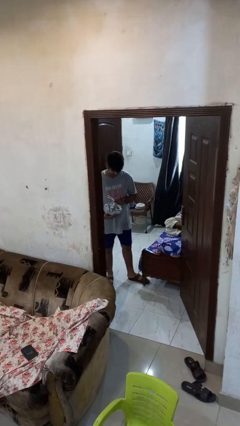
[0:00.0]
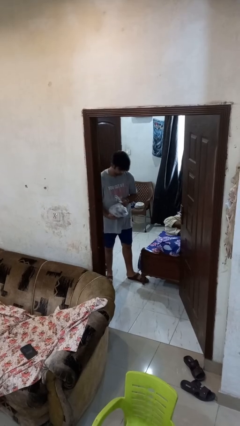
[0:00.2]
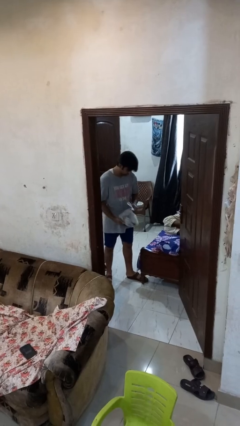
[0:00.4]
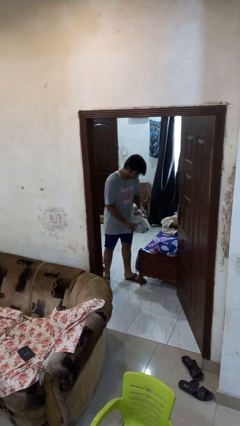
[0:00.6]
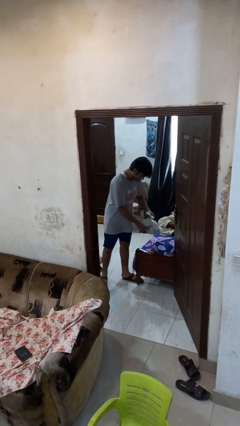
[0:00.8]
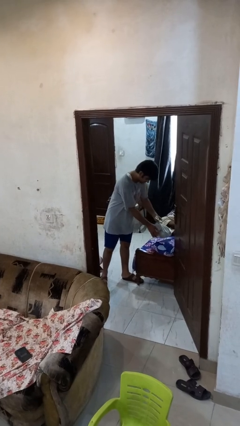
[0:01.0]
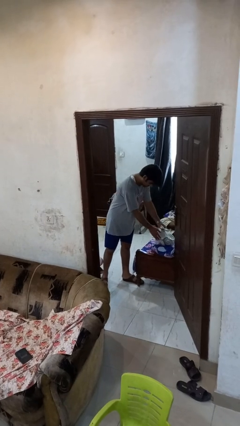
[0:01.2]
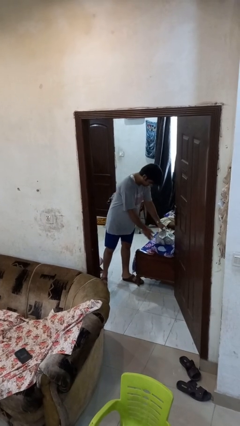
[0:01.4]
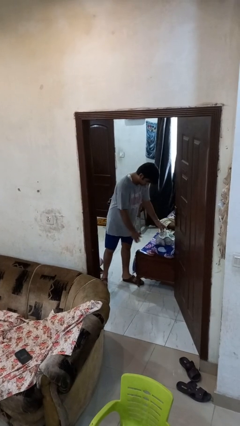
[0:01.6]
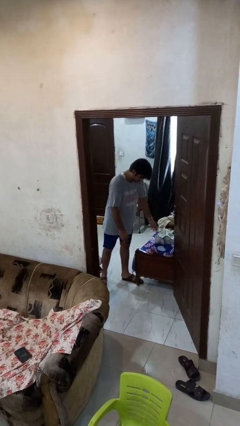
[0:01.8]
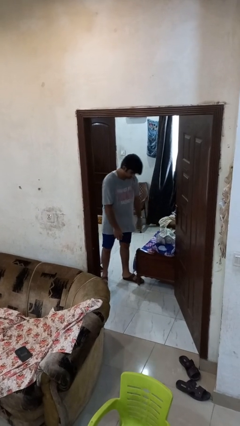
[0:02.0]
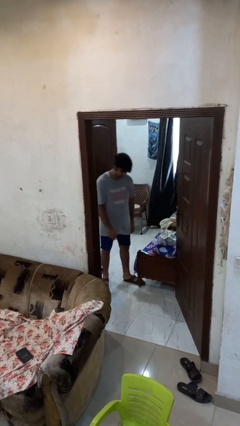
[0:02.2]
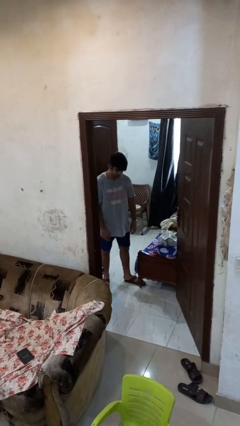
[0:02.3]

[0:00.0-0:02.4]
person puts down object on bed

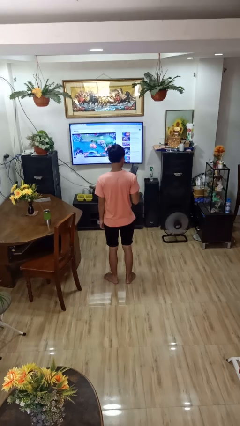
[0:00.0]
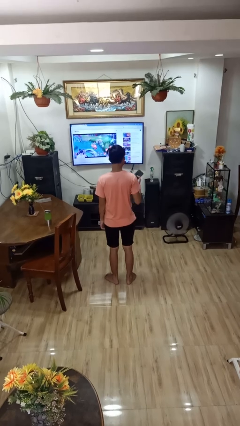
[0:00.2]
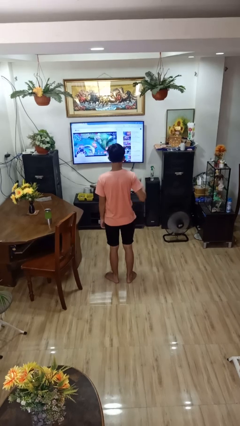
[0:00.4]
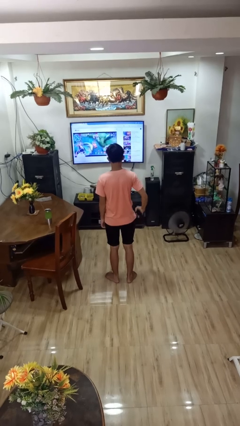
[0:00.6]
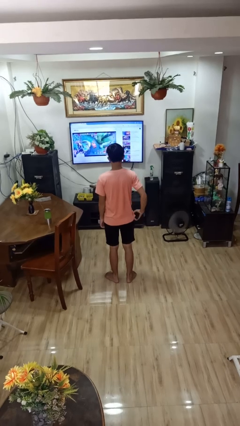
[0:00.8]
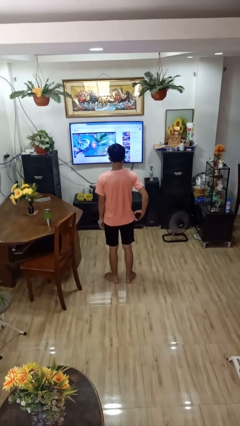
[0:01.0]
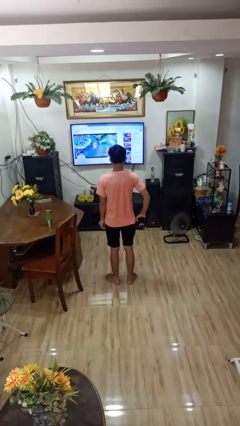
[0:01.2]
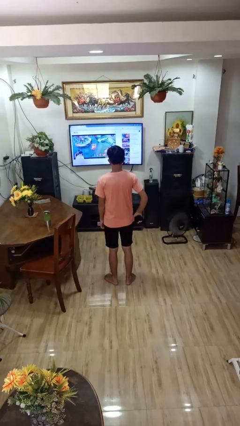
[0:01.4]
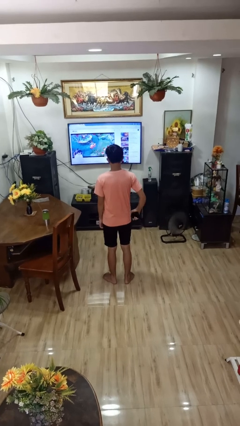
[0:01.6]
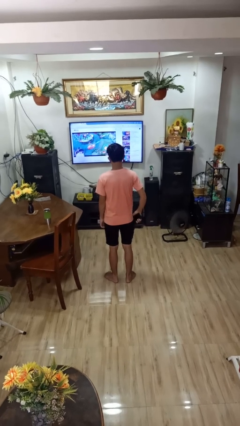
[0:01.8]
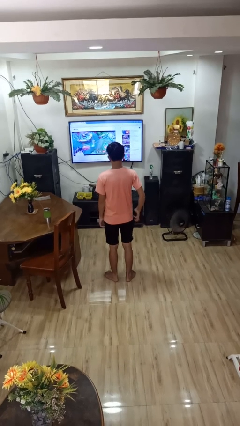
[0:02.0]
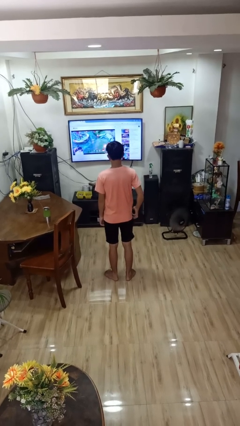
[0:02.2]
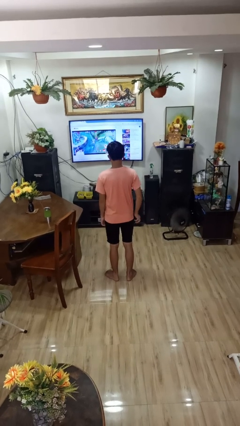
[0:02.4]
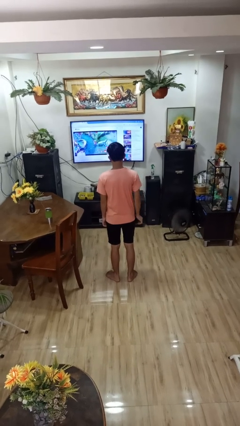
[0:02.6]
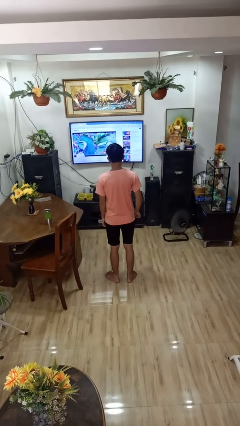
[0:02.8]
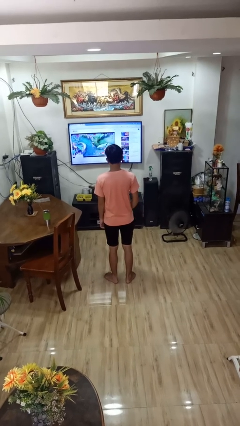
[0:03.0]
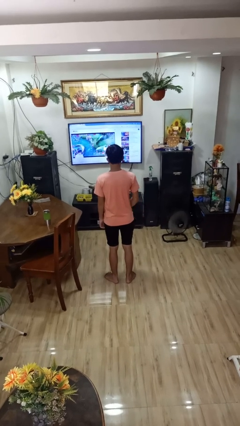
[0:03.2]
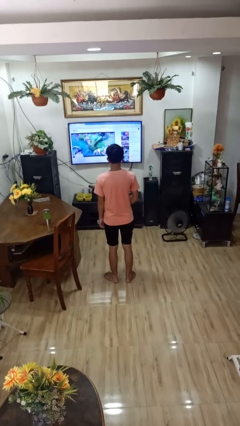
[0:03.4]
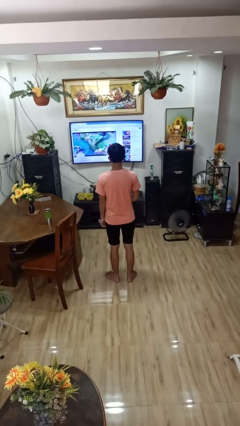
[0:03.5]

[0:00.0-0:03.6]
person puts phone into pocket

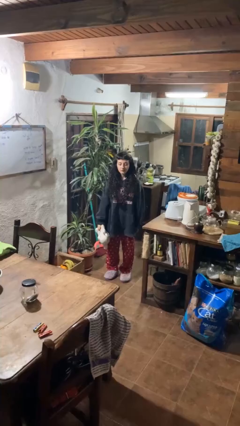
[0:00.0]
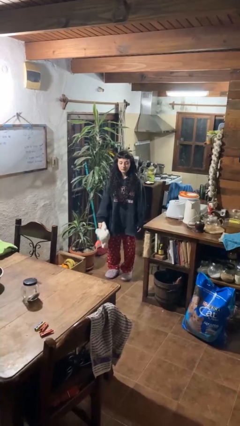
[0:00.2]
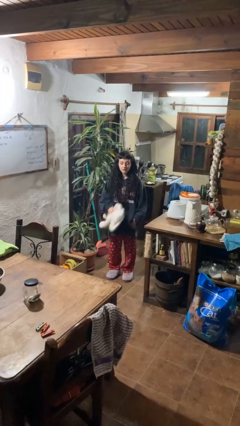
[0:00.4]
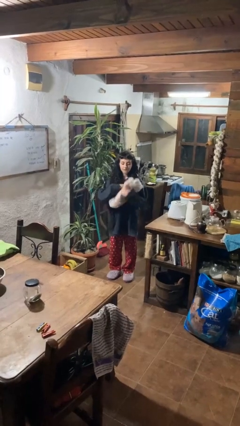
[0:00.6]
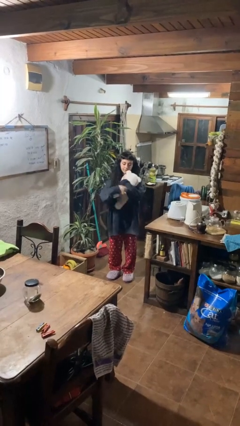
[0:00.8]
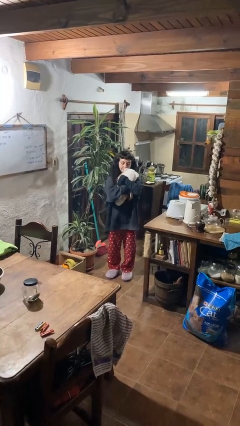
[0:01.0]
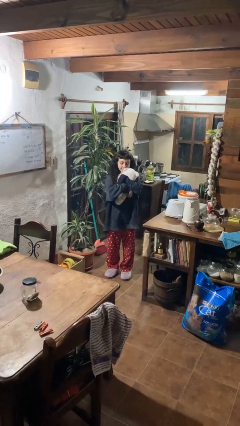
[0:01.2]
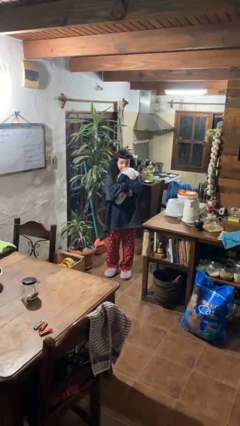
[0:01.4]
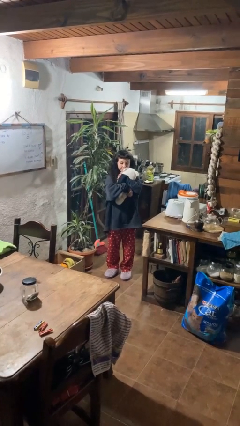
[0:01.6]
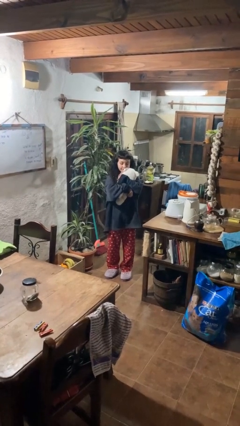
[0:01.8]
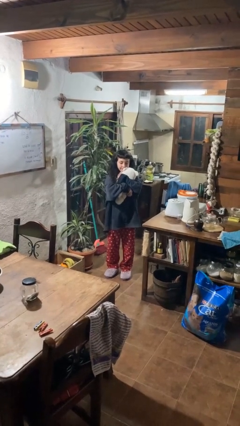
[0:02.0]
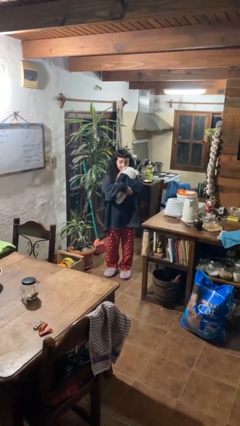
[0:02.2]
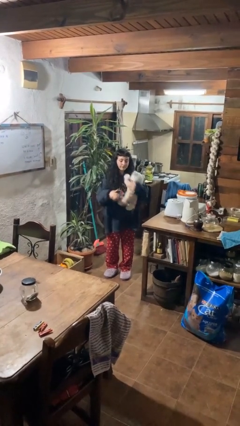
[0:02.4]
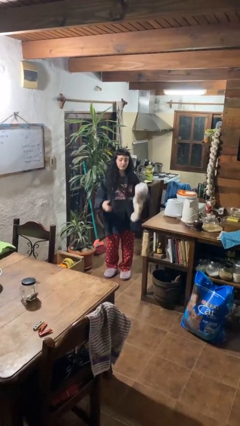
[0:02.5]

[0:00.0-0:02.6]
person hugs stuffed animal

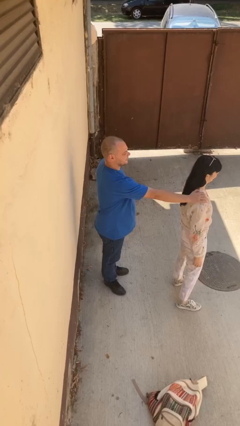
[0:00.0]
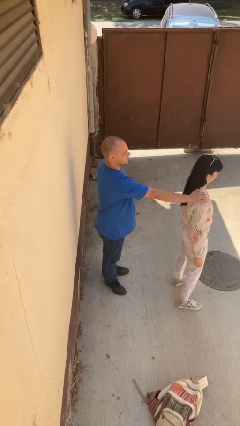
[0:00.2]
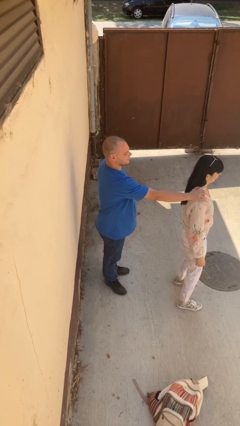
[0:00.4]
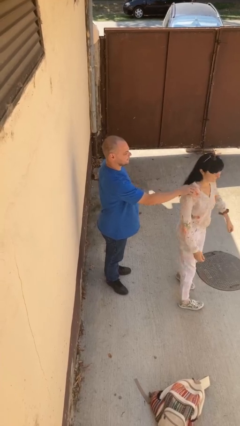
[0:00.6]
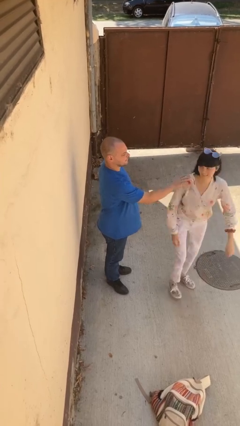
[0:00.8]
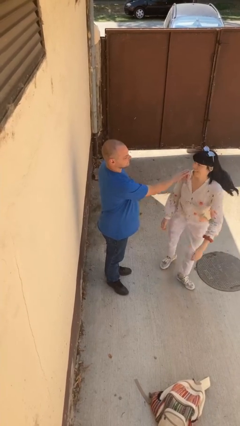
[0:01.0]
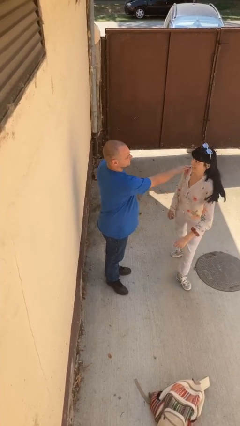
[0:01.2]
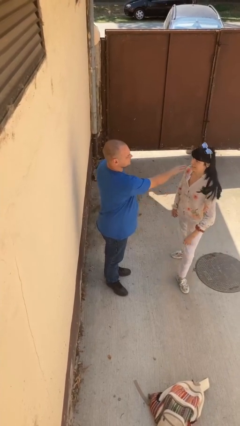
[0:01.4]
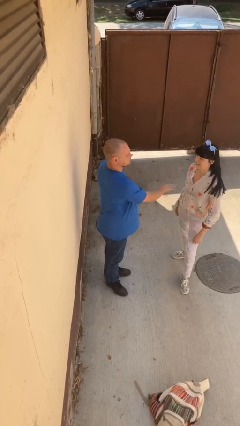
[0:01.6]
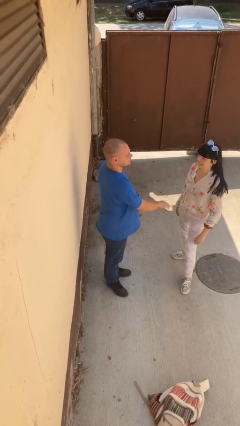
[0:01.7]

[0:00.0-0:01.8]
person spins person around

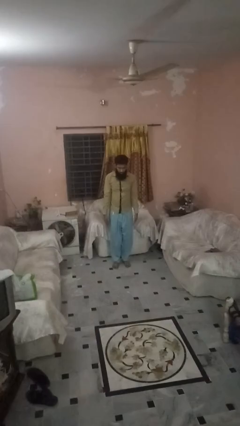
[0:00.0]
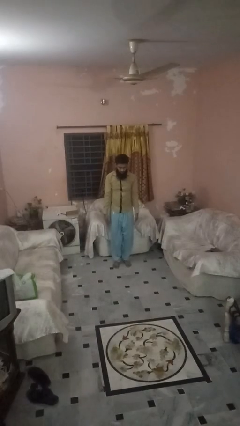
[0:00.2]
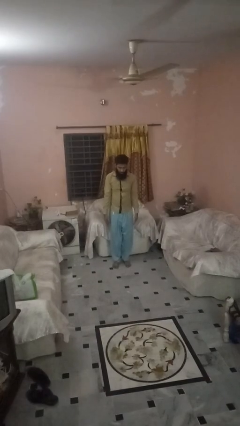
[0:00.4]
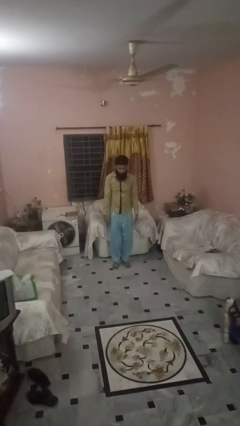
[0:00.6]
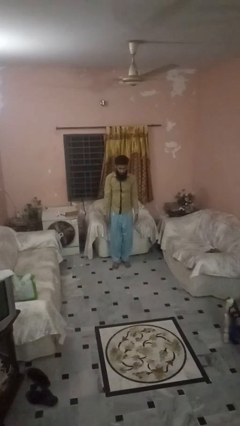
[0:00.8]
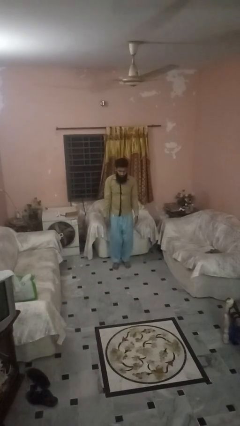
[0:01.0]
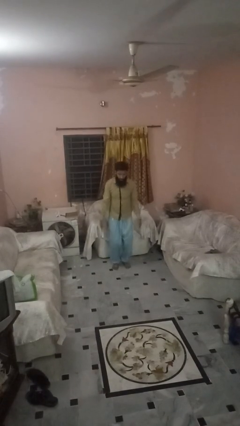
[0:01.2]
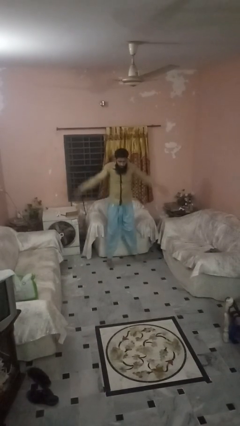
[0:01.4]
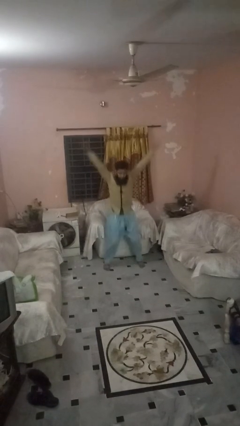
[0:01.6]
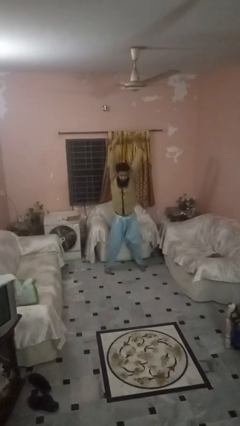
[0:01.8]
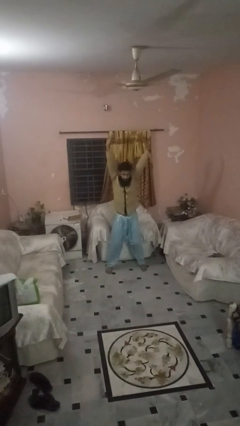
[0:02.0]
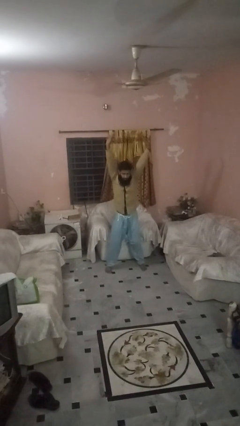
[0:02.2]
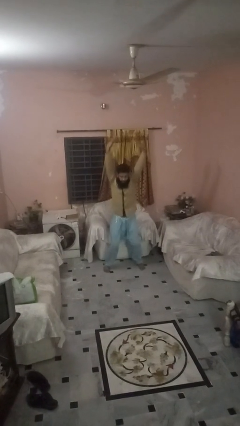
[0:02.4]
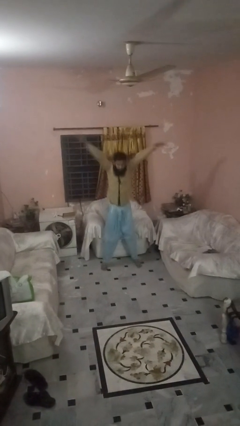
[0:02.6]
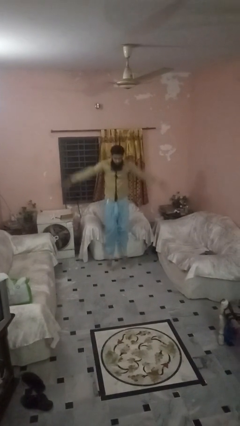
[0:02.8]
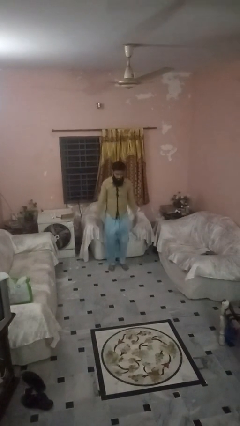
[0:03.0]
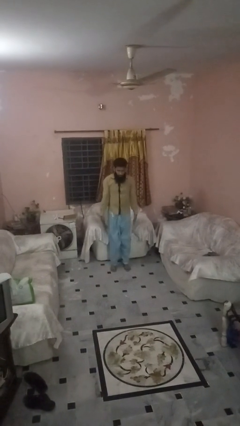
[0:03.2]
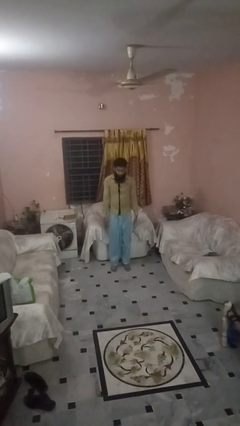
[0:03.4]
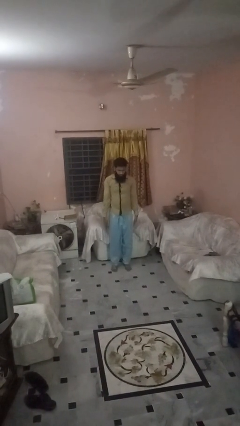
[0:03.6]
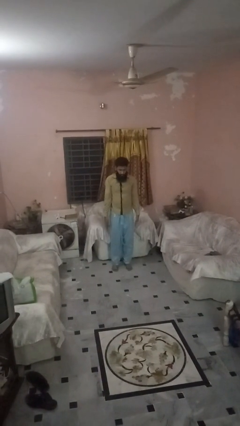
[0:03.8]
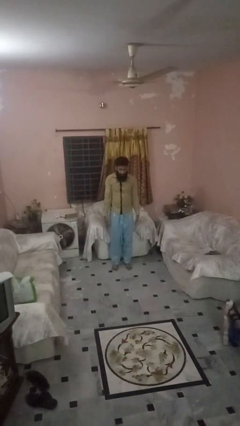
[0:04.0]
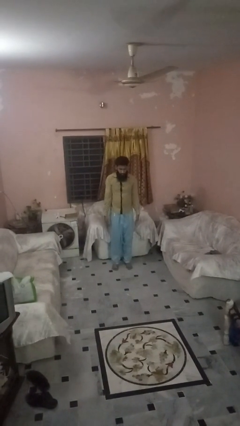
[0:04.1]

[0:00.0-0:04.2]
person exercises with jumping jacks

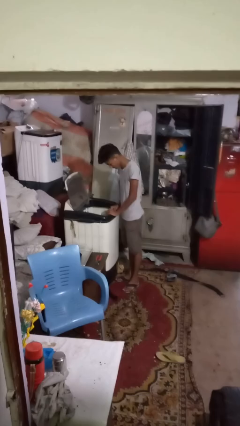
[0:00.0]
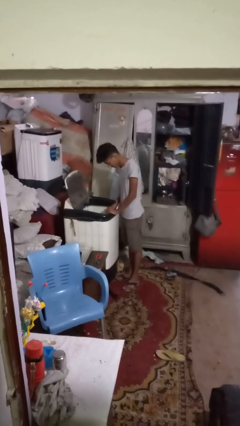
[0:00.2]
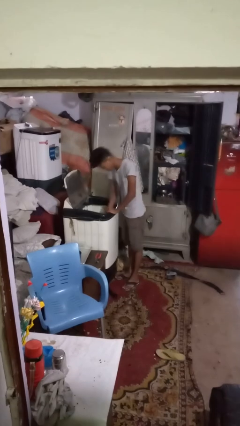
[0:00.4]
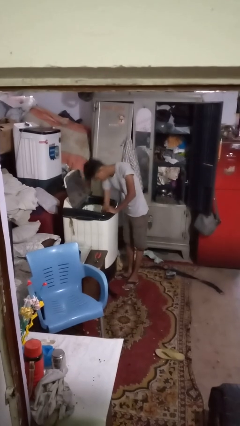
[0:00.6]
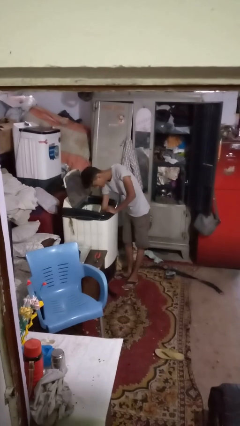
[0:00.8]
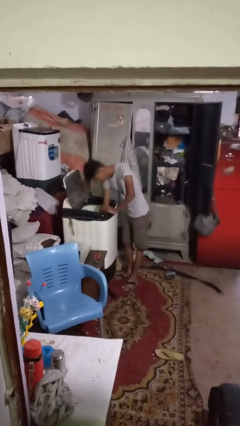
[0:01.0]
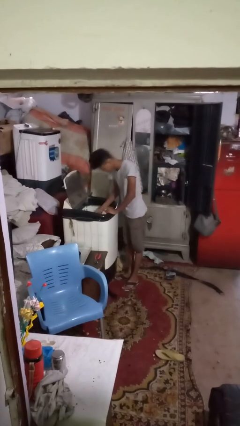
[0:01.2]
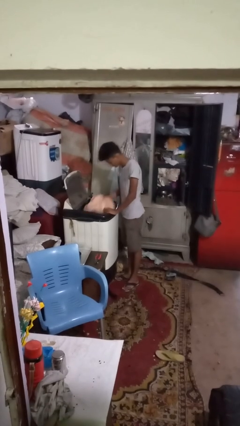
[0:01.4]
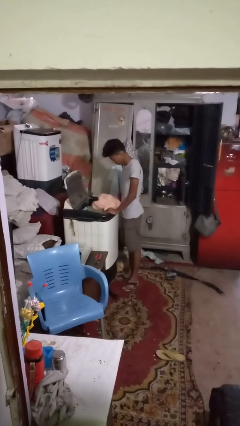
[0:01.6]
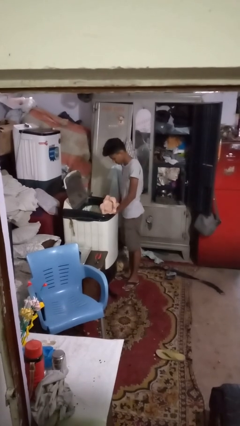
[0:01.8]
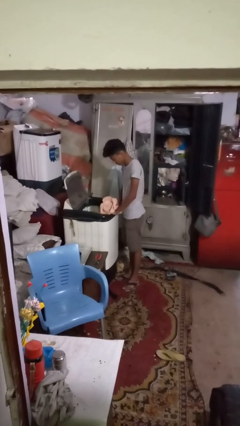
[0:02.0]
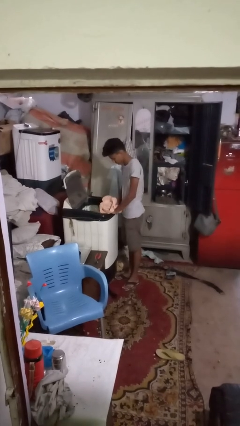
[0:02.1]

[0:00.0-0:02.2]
person unloads clotheswasher

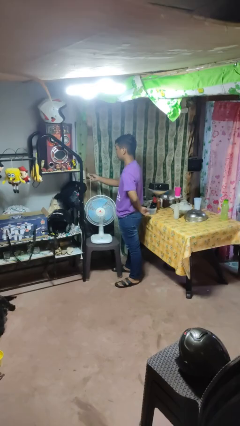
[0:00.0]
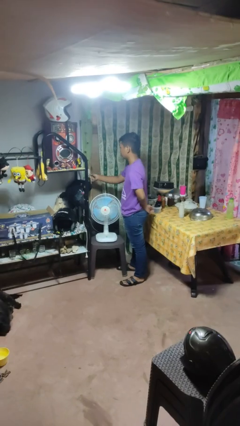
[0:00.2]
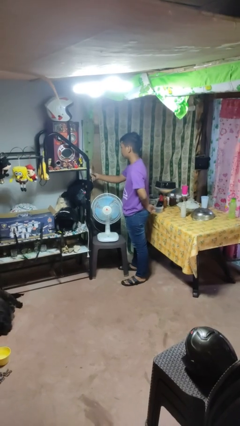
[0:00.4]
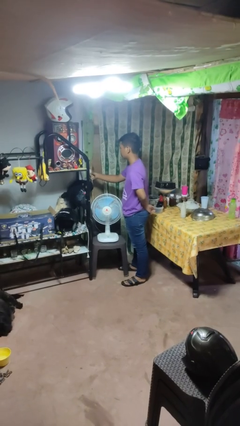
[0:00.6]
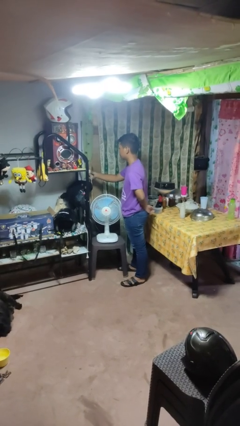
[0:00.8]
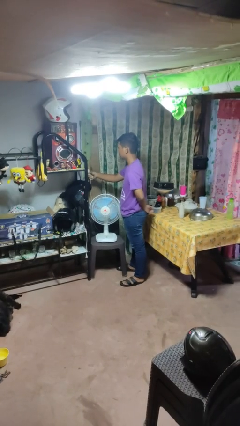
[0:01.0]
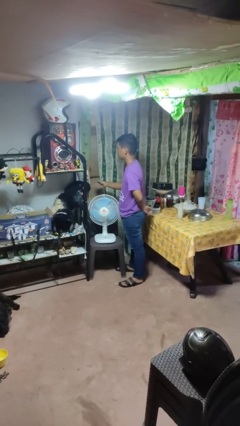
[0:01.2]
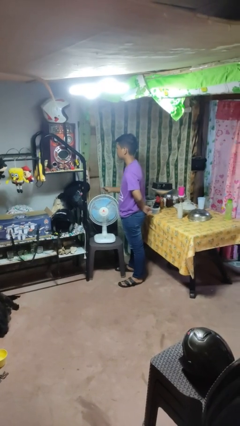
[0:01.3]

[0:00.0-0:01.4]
person plugs into electrical socket
